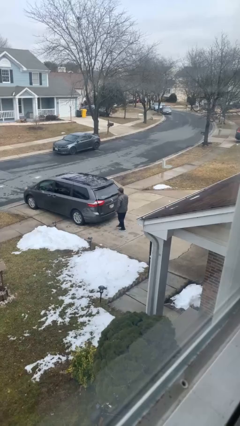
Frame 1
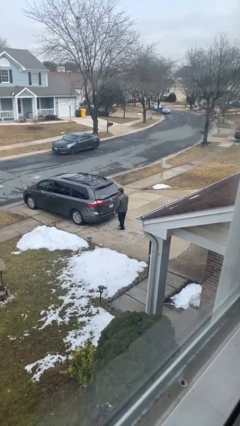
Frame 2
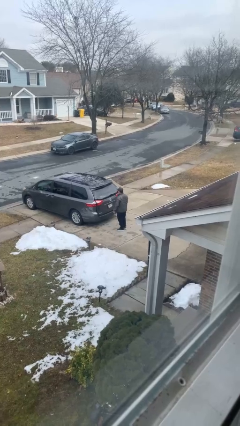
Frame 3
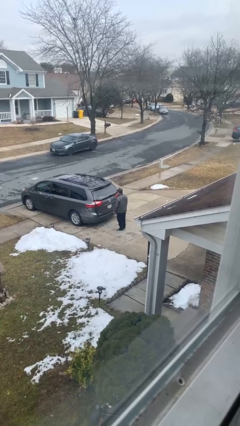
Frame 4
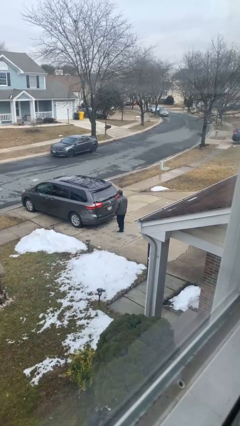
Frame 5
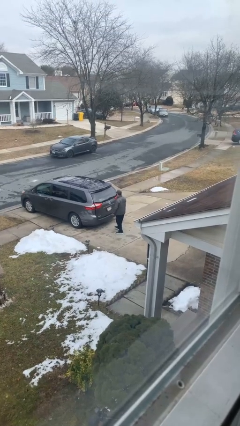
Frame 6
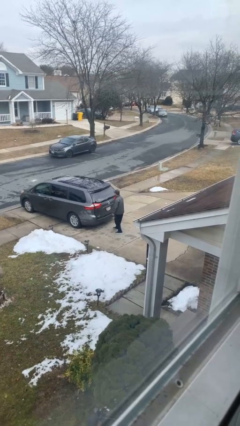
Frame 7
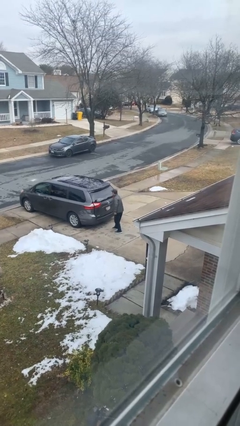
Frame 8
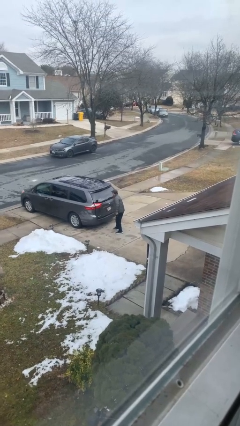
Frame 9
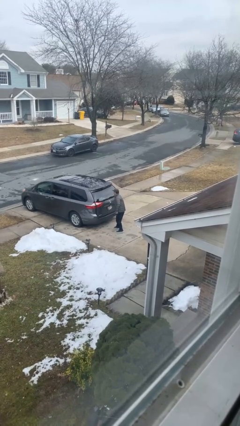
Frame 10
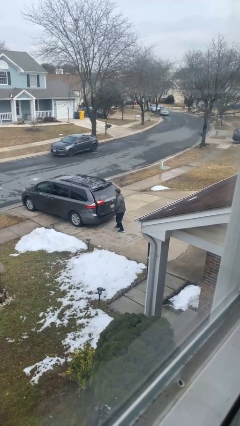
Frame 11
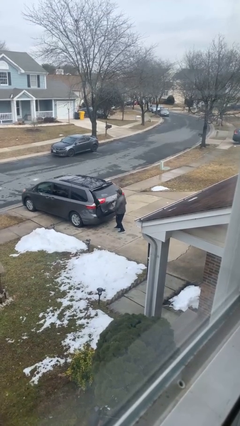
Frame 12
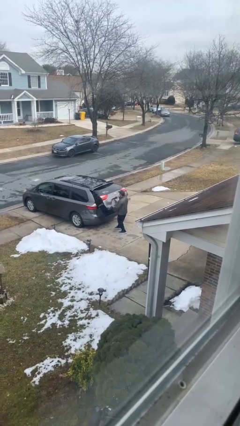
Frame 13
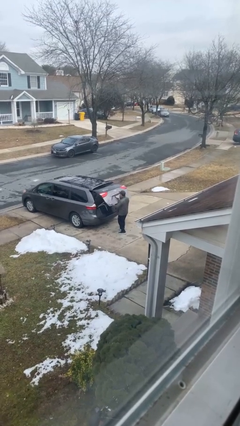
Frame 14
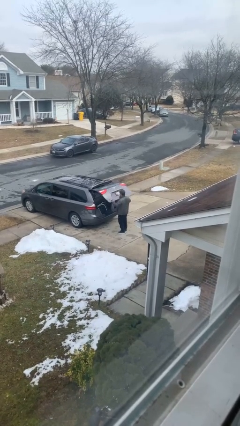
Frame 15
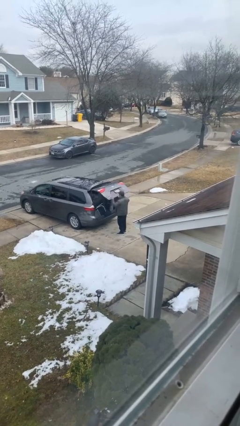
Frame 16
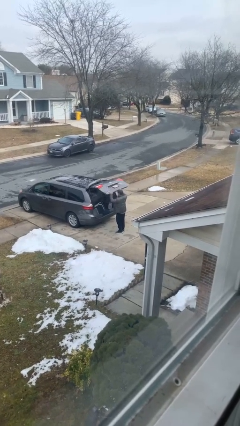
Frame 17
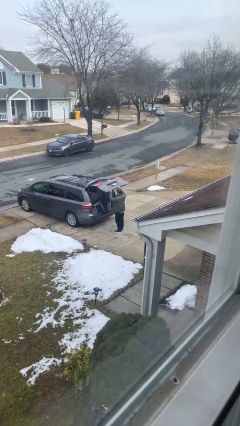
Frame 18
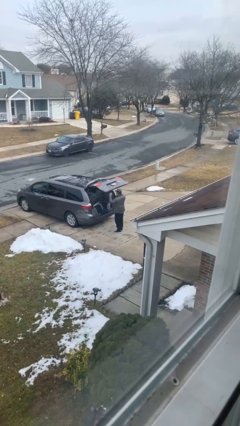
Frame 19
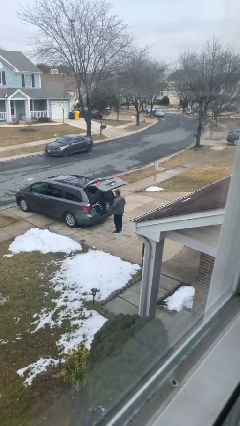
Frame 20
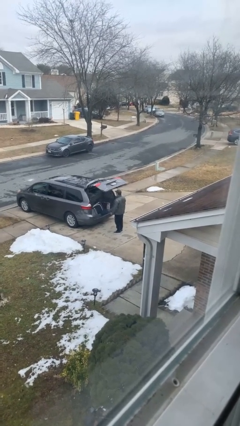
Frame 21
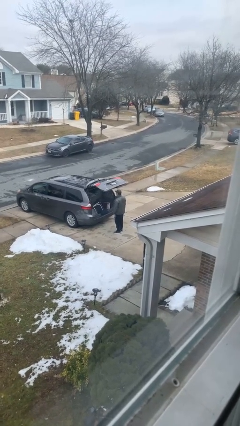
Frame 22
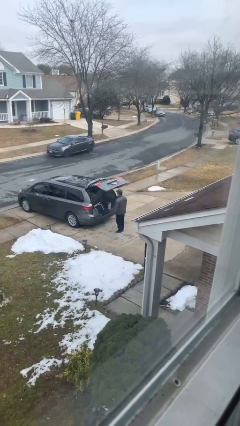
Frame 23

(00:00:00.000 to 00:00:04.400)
person opens car trunk

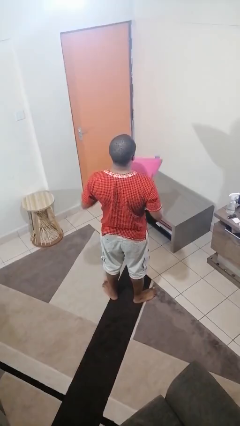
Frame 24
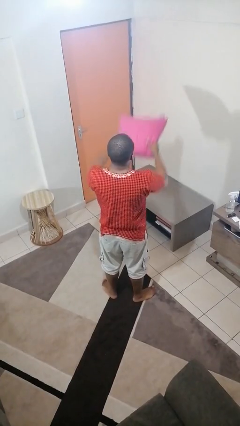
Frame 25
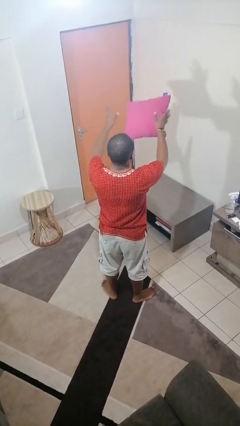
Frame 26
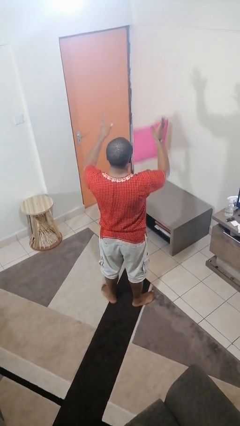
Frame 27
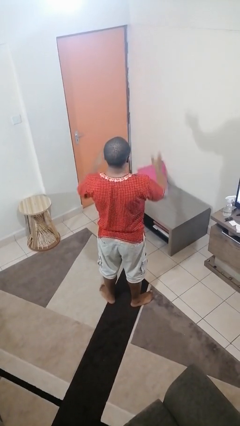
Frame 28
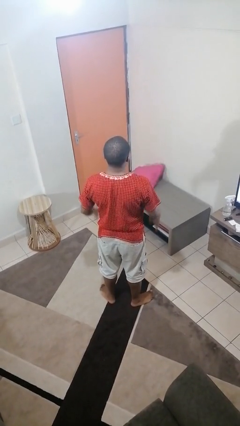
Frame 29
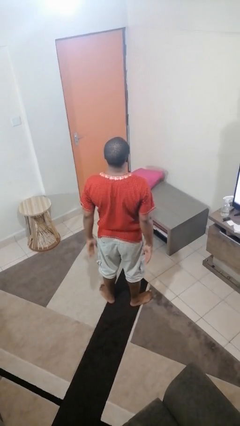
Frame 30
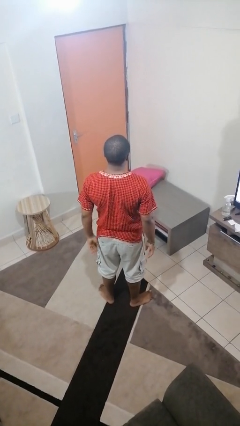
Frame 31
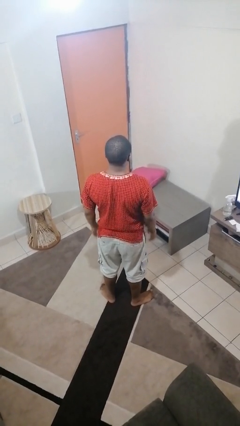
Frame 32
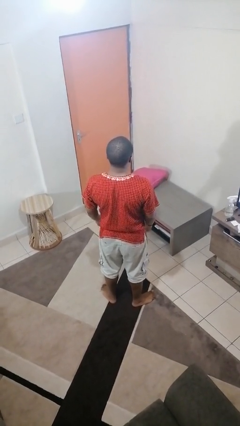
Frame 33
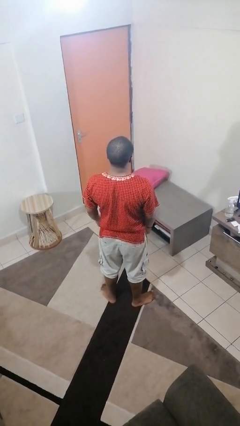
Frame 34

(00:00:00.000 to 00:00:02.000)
person throws object on table

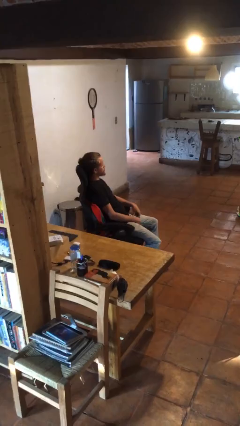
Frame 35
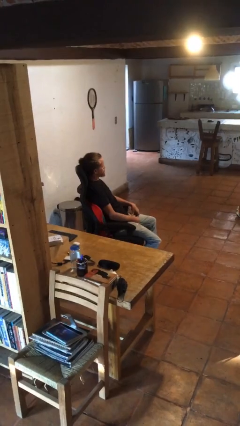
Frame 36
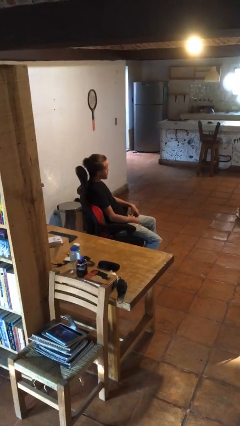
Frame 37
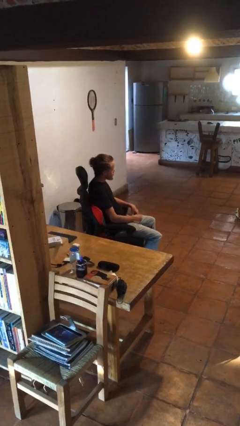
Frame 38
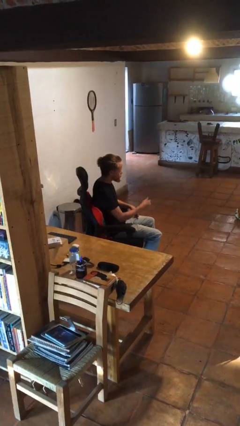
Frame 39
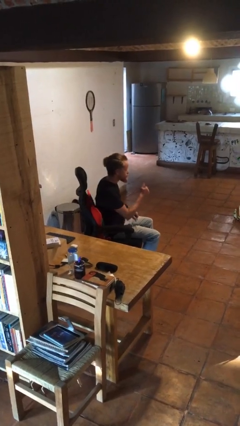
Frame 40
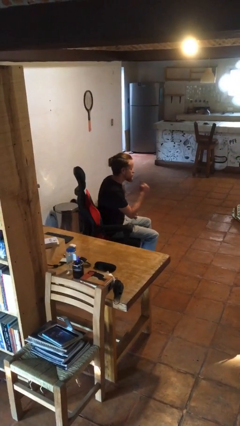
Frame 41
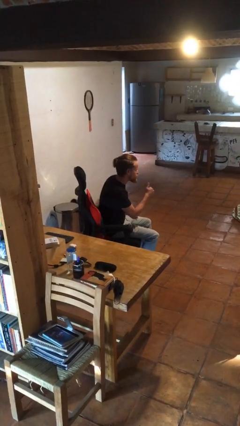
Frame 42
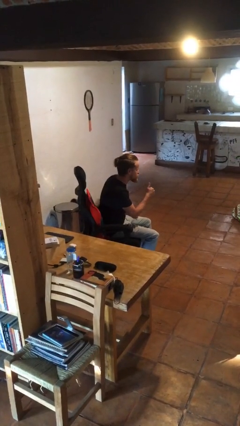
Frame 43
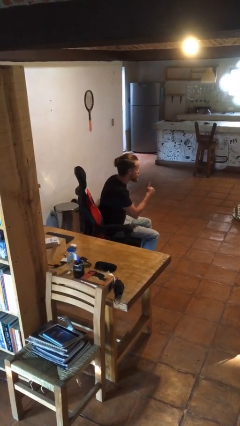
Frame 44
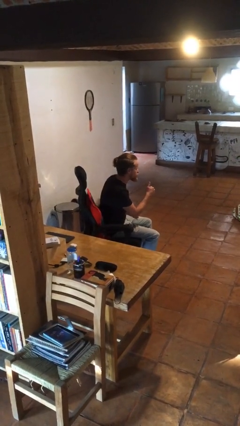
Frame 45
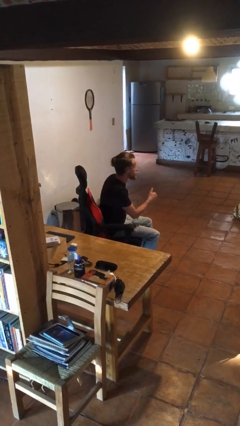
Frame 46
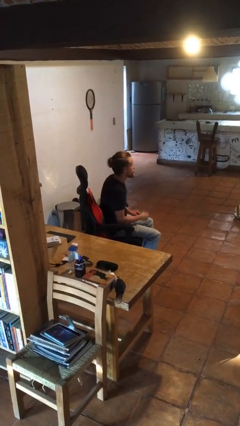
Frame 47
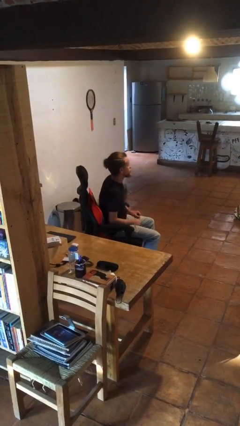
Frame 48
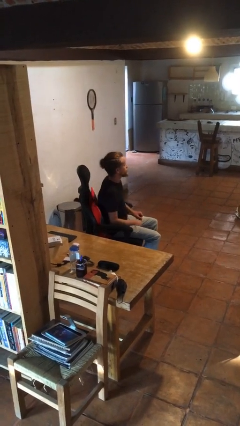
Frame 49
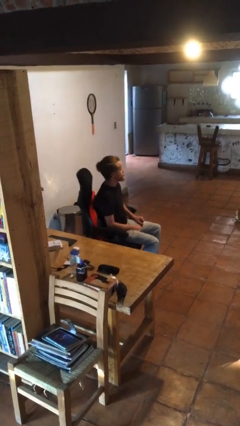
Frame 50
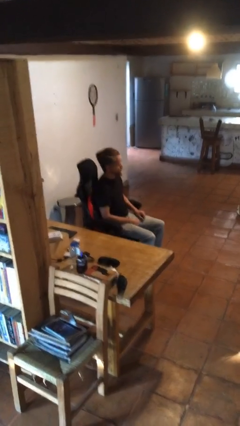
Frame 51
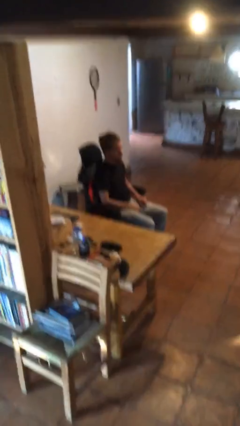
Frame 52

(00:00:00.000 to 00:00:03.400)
person gestures thumbs up

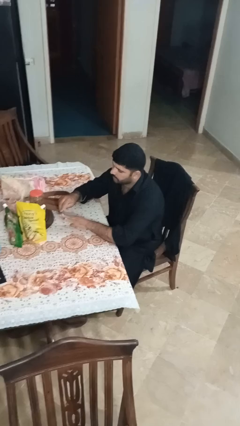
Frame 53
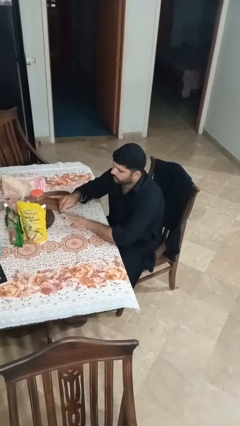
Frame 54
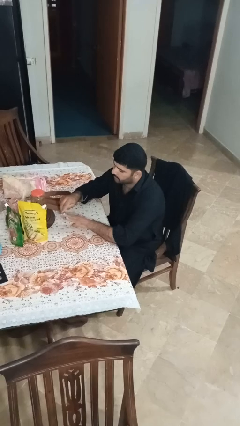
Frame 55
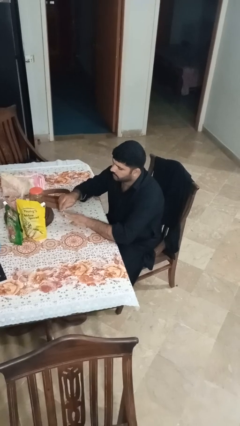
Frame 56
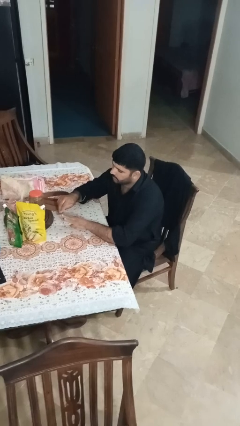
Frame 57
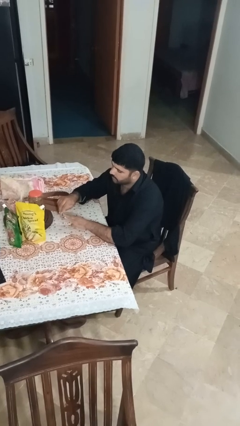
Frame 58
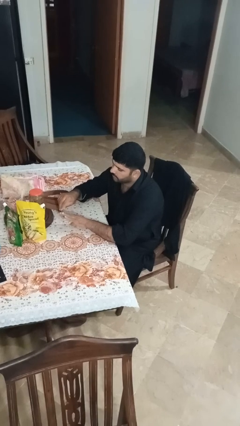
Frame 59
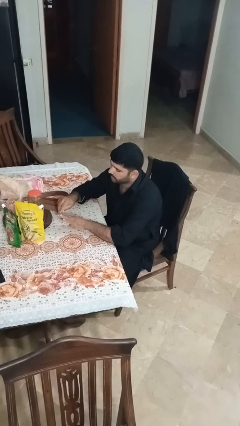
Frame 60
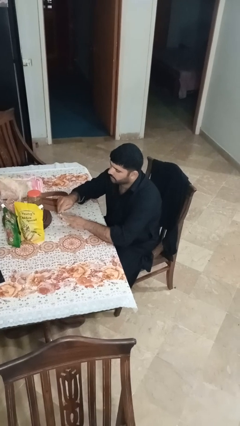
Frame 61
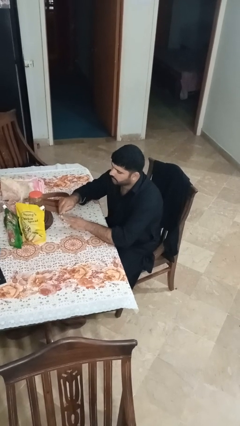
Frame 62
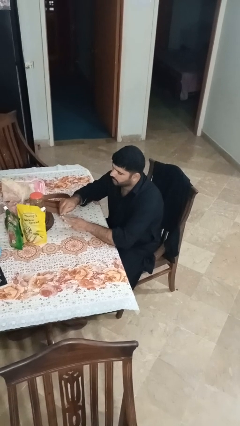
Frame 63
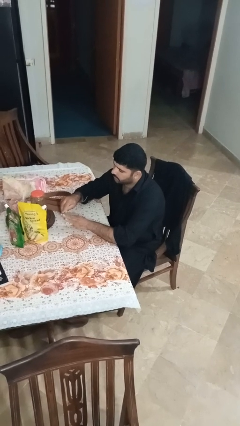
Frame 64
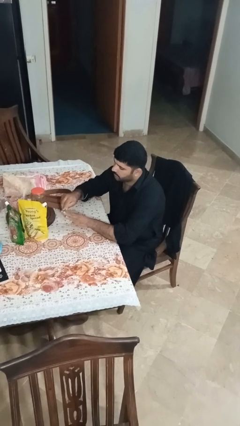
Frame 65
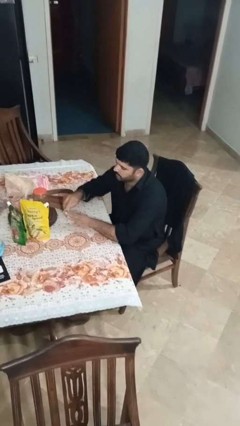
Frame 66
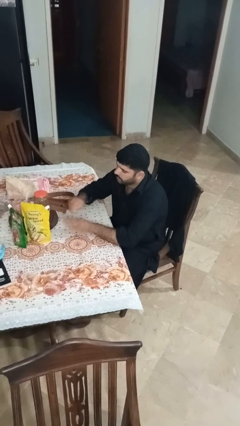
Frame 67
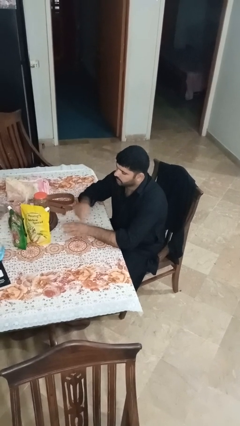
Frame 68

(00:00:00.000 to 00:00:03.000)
person files fingernails

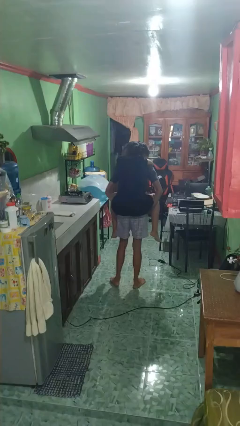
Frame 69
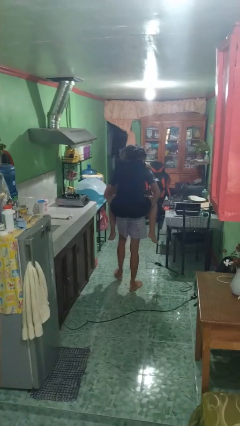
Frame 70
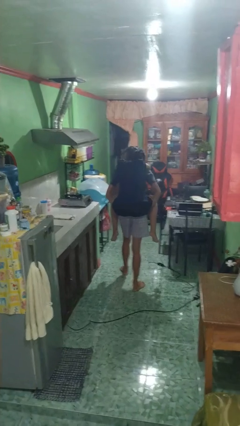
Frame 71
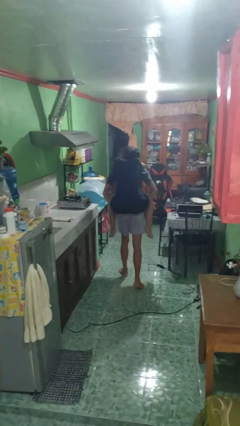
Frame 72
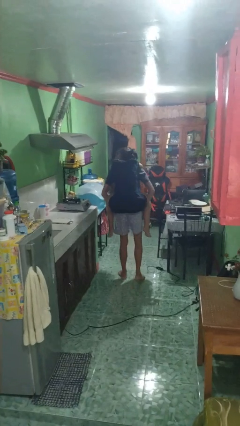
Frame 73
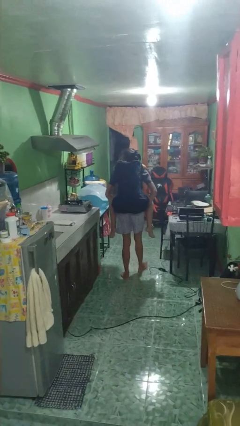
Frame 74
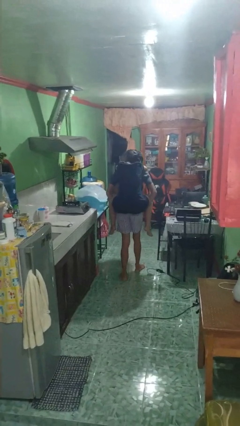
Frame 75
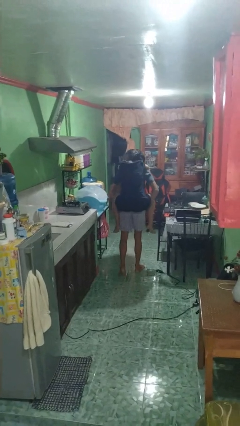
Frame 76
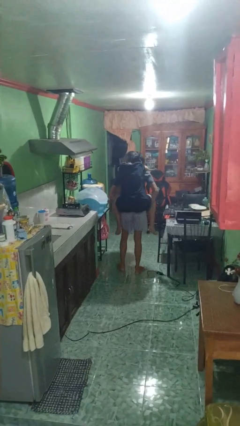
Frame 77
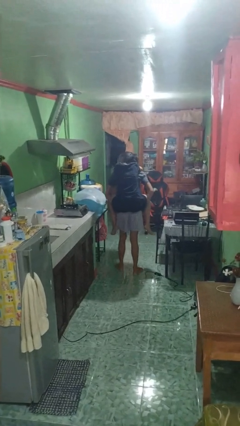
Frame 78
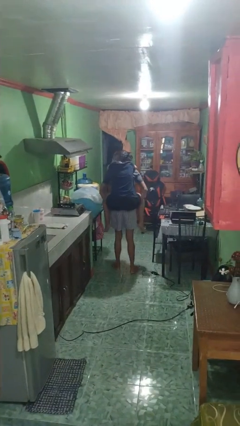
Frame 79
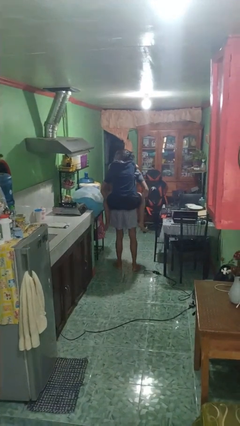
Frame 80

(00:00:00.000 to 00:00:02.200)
person carries person on back

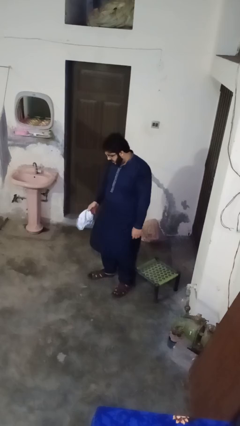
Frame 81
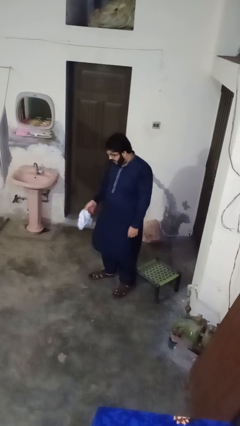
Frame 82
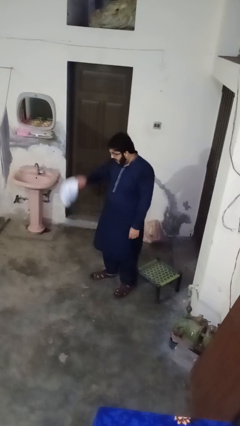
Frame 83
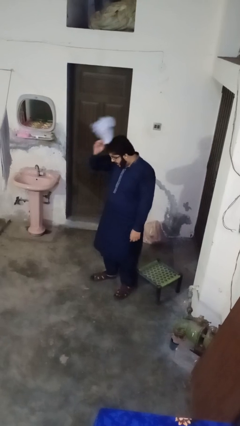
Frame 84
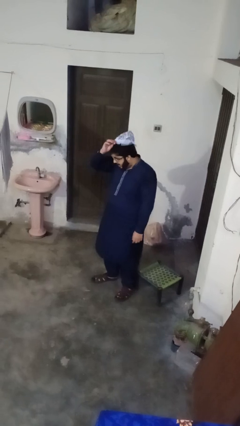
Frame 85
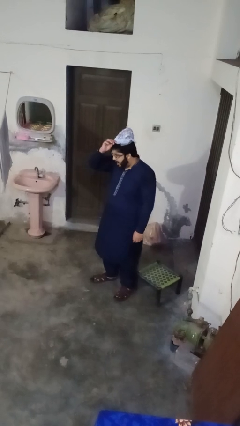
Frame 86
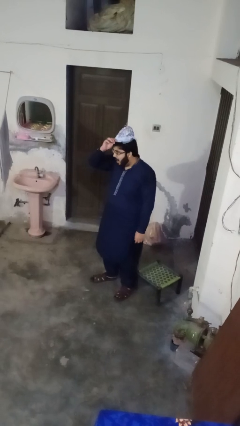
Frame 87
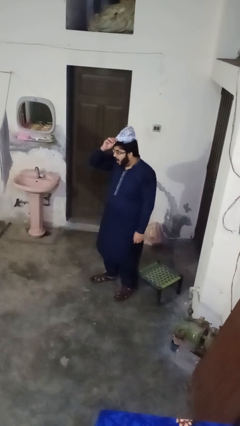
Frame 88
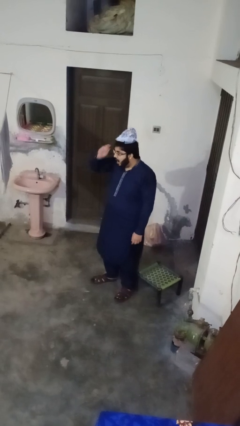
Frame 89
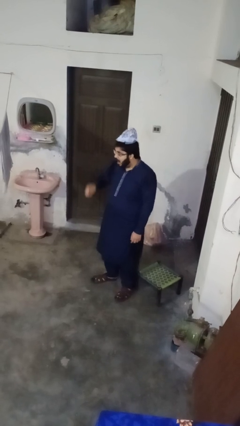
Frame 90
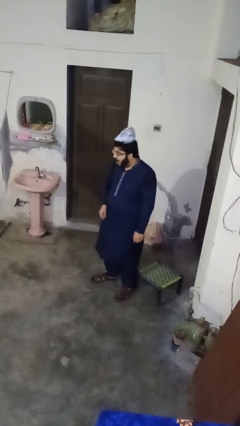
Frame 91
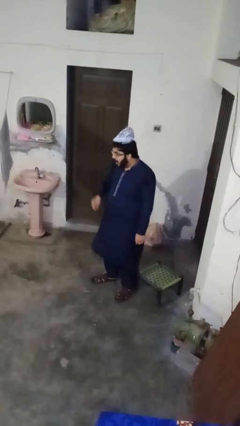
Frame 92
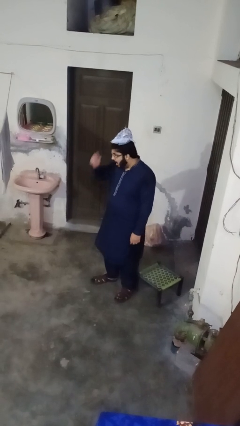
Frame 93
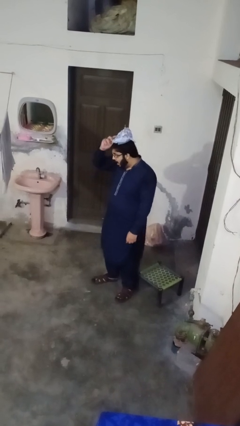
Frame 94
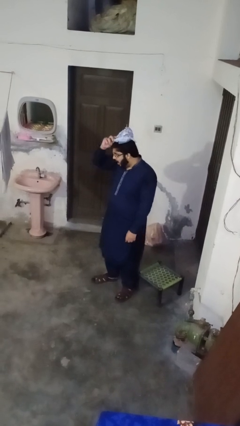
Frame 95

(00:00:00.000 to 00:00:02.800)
person puts on hat
